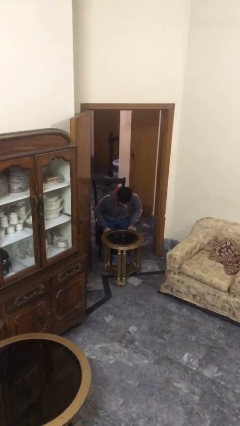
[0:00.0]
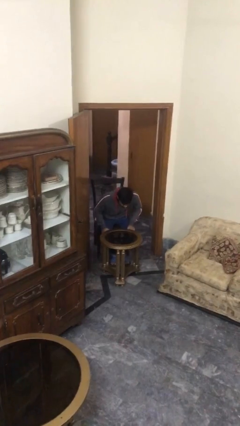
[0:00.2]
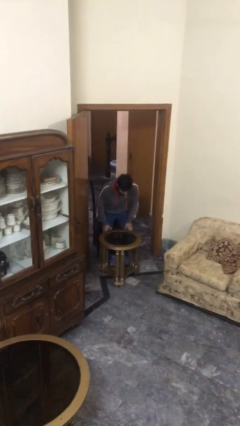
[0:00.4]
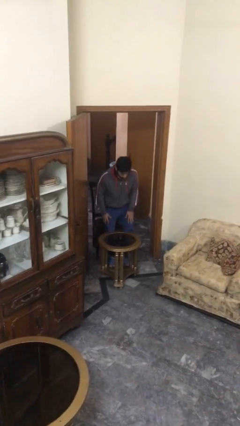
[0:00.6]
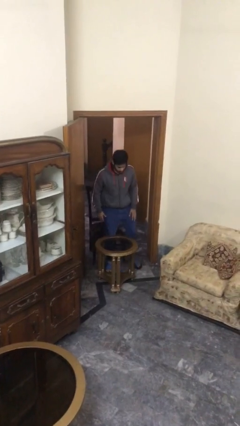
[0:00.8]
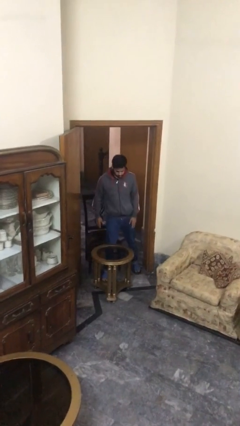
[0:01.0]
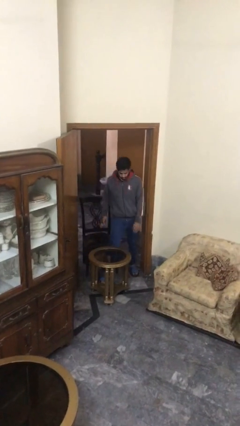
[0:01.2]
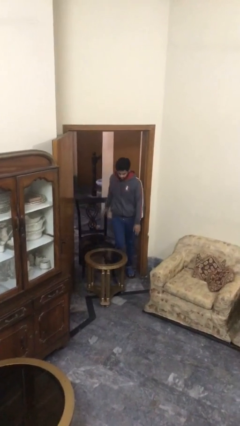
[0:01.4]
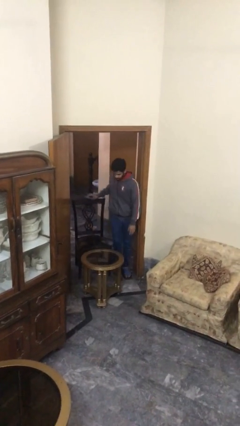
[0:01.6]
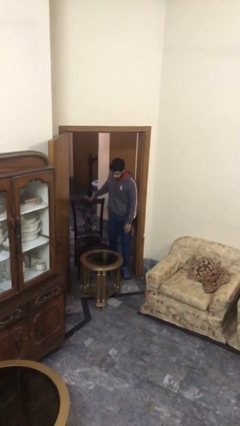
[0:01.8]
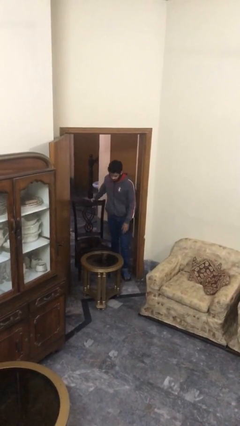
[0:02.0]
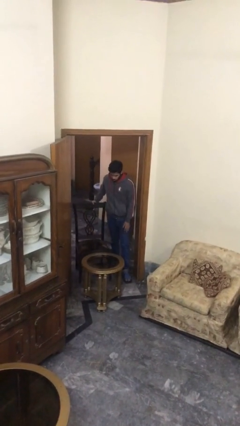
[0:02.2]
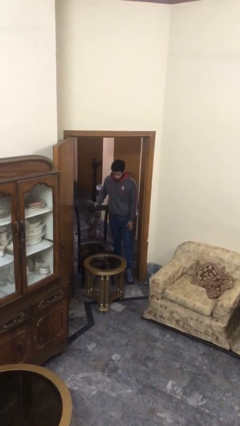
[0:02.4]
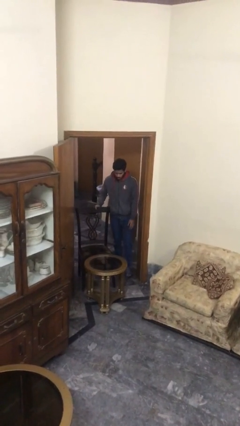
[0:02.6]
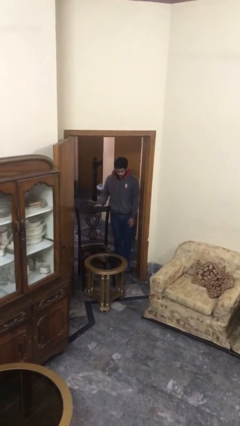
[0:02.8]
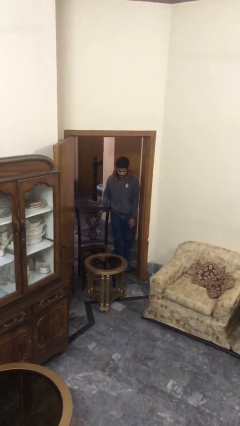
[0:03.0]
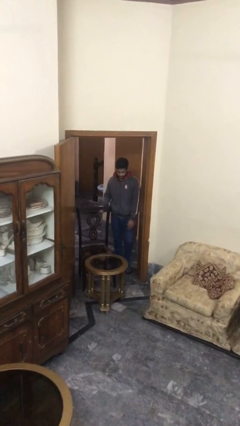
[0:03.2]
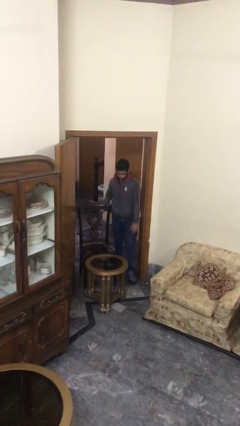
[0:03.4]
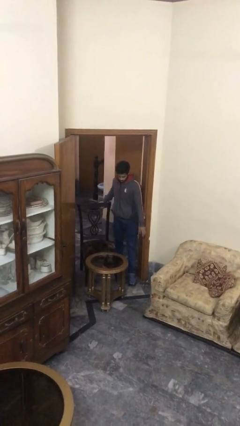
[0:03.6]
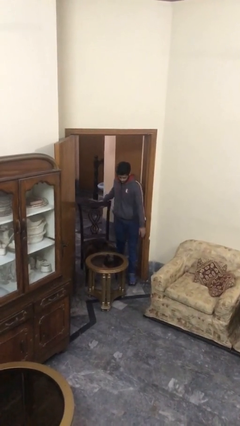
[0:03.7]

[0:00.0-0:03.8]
person stands up

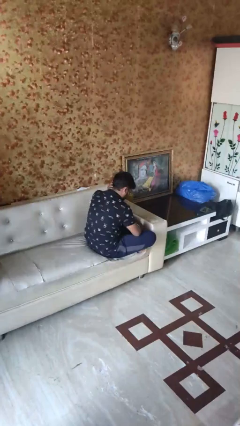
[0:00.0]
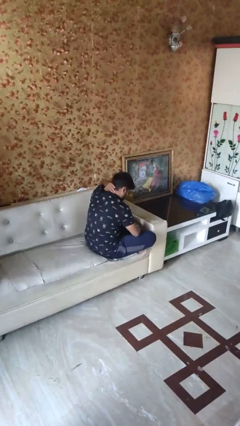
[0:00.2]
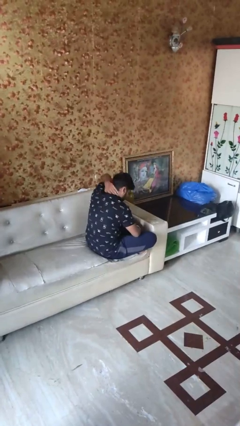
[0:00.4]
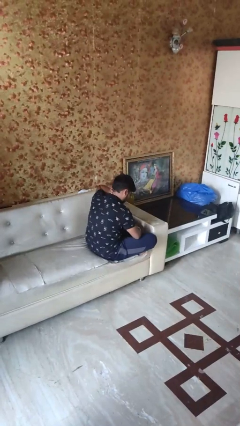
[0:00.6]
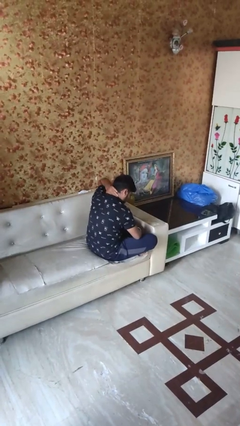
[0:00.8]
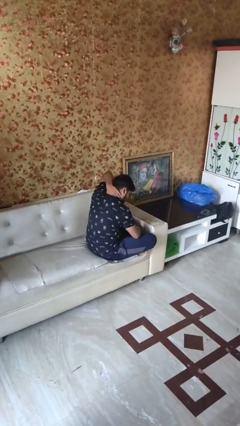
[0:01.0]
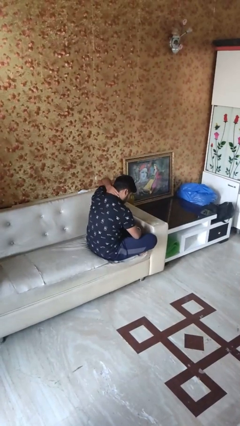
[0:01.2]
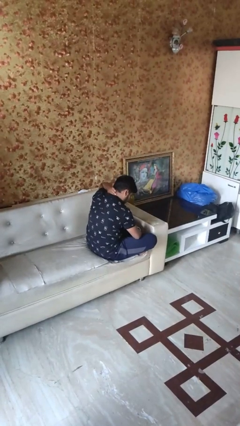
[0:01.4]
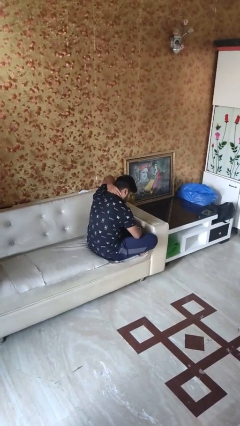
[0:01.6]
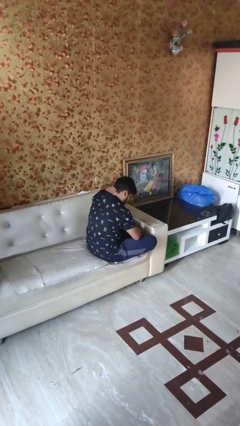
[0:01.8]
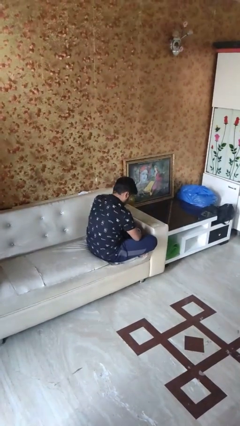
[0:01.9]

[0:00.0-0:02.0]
person rubs neck

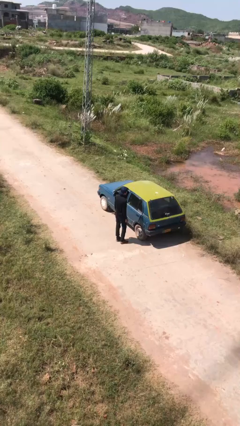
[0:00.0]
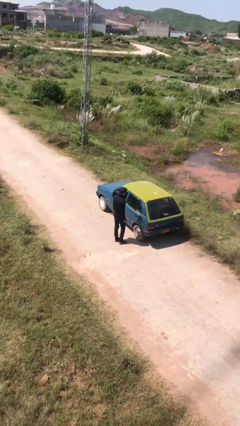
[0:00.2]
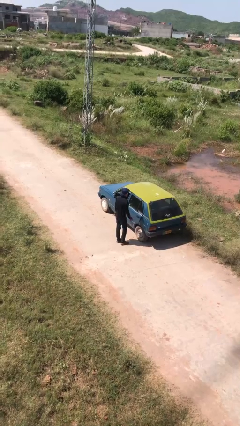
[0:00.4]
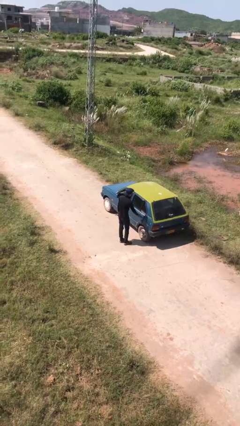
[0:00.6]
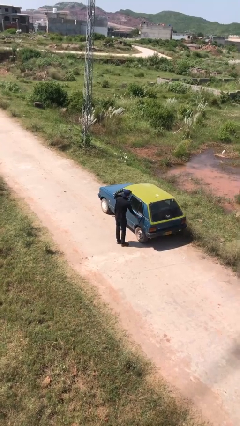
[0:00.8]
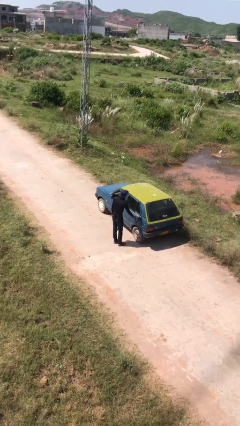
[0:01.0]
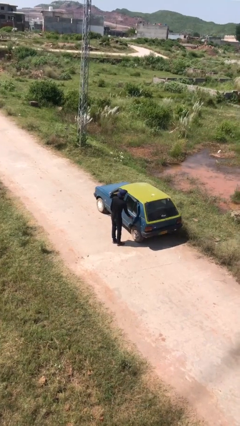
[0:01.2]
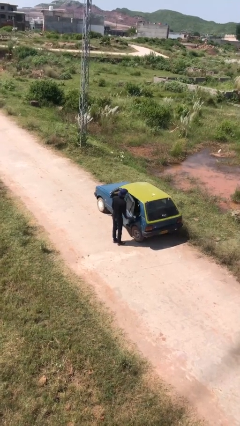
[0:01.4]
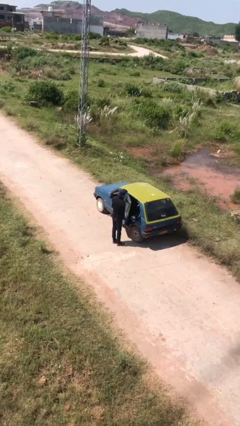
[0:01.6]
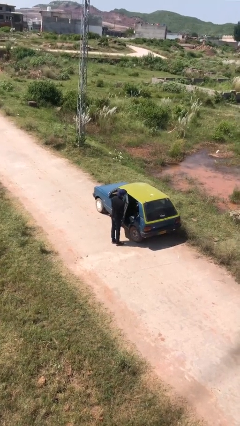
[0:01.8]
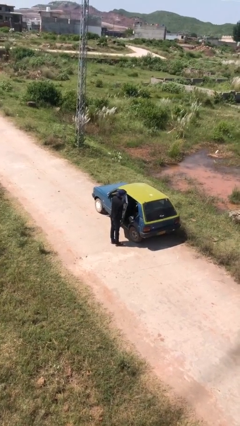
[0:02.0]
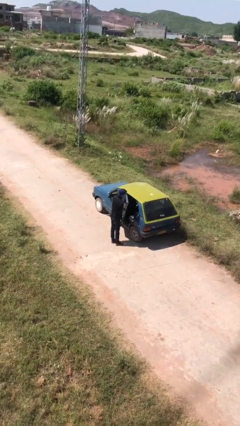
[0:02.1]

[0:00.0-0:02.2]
person opens car door

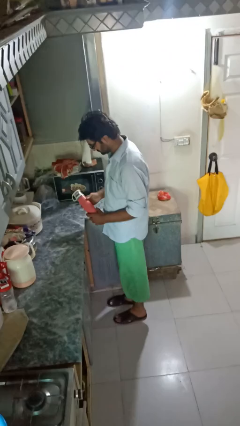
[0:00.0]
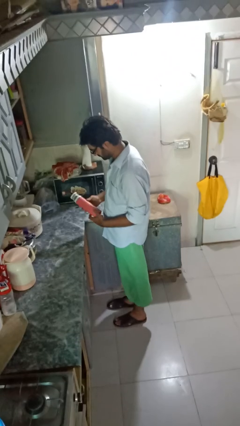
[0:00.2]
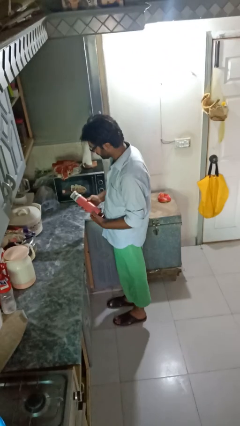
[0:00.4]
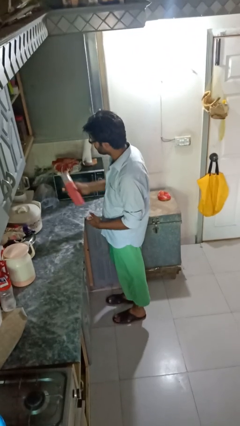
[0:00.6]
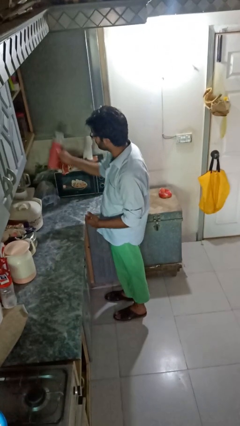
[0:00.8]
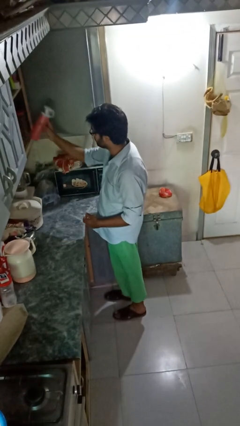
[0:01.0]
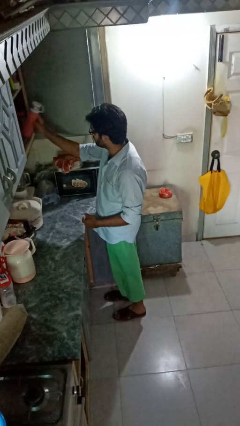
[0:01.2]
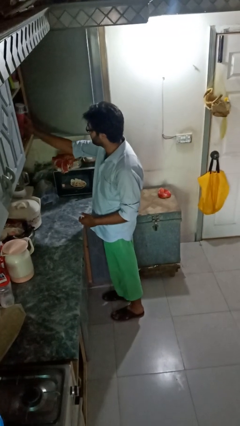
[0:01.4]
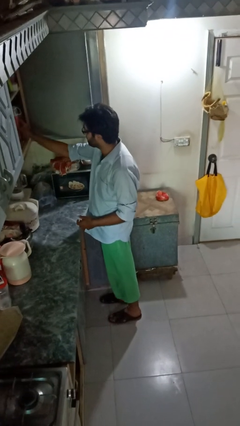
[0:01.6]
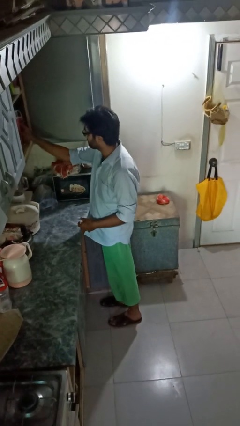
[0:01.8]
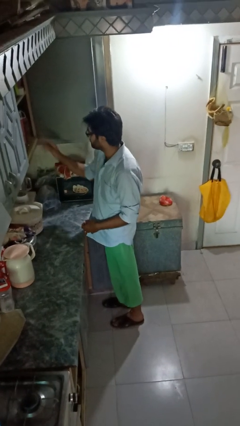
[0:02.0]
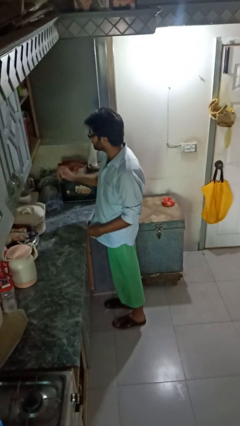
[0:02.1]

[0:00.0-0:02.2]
person puts down object into cabinet

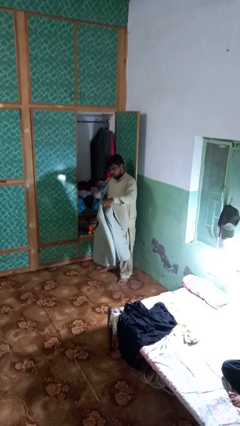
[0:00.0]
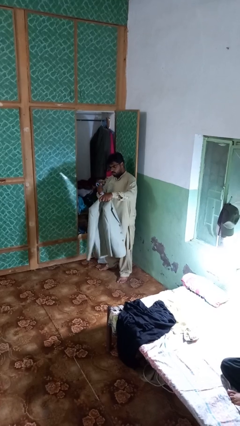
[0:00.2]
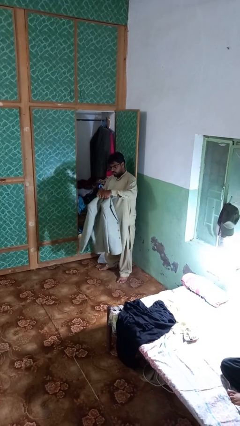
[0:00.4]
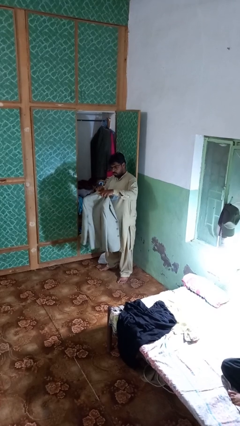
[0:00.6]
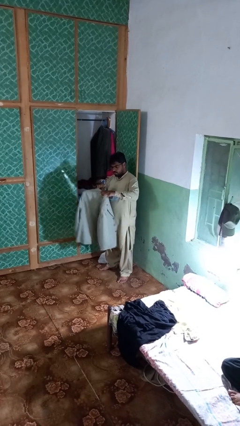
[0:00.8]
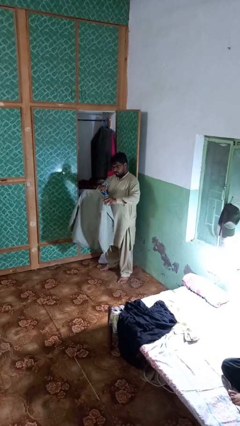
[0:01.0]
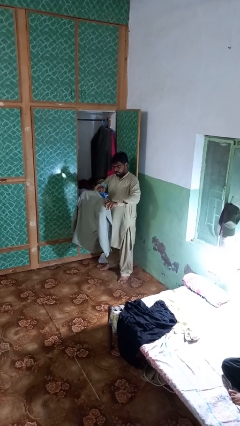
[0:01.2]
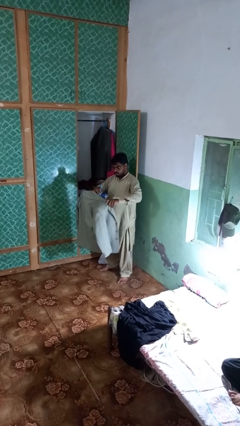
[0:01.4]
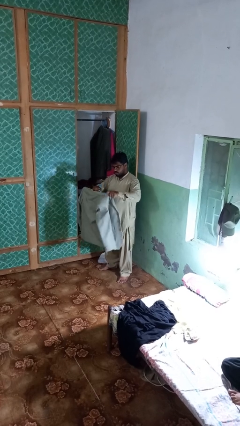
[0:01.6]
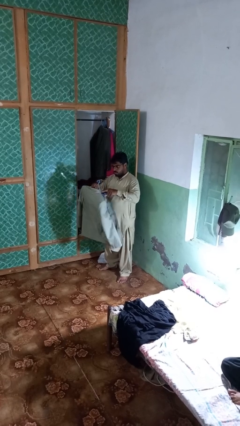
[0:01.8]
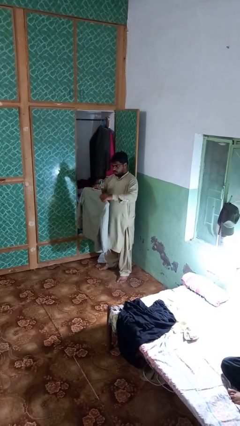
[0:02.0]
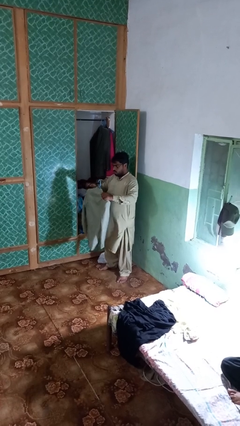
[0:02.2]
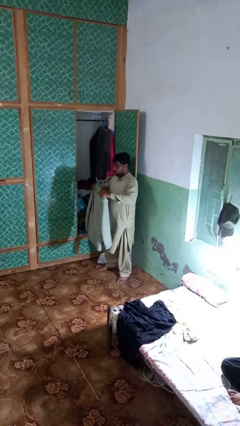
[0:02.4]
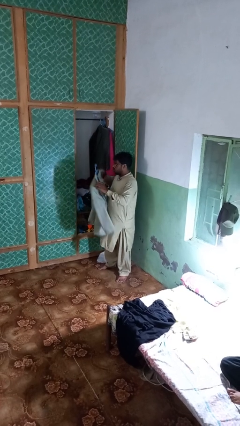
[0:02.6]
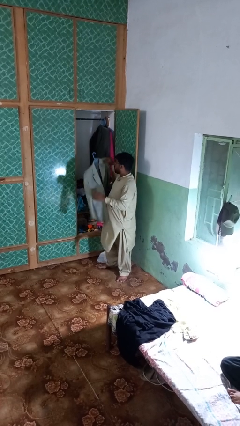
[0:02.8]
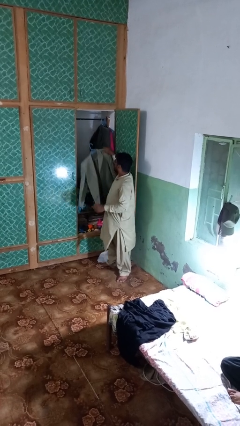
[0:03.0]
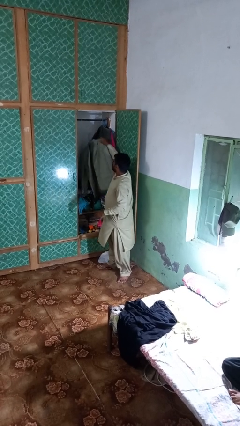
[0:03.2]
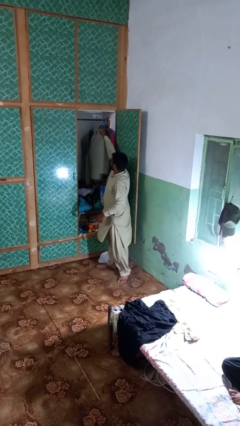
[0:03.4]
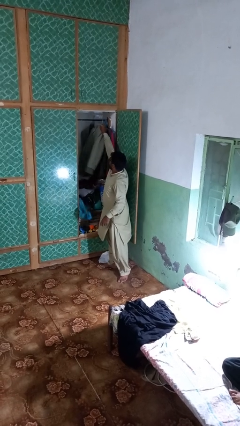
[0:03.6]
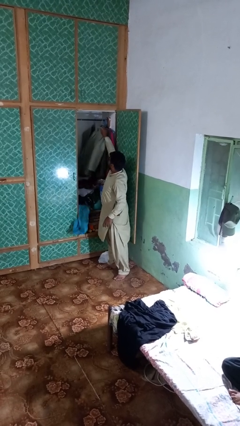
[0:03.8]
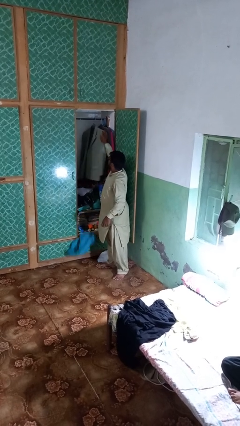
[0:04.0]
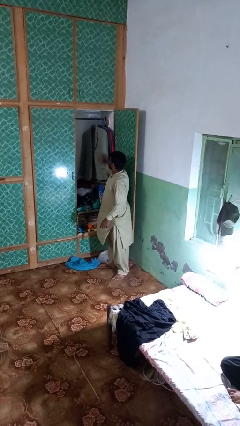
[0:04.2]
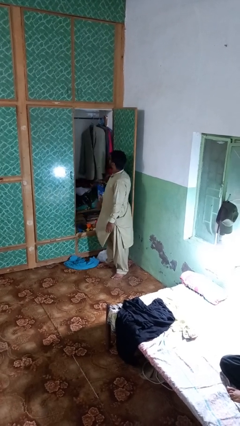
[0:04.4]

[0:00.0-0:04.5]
person puts clothes into closet

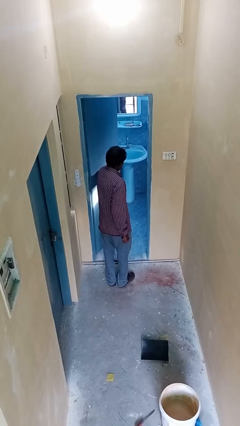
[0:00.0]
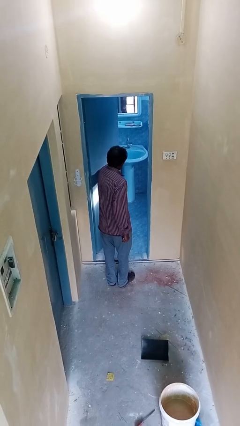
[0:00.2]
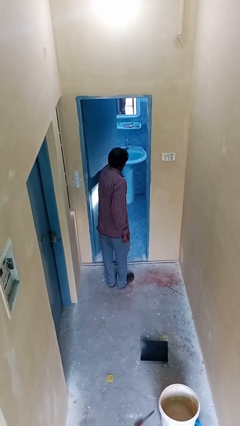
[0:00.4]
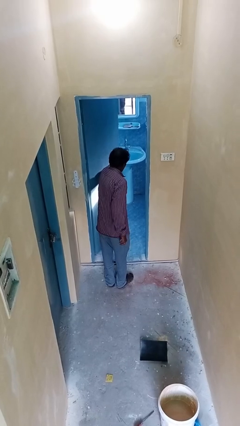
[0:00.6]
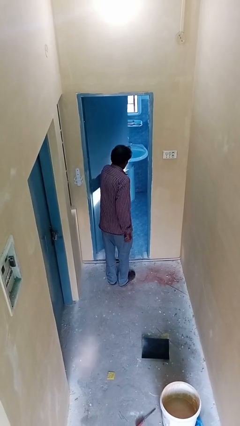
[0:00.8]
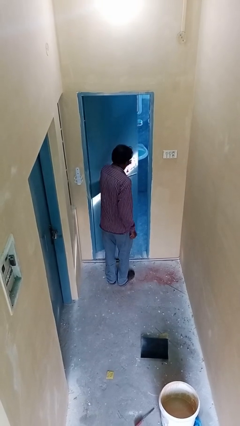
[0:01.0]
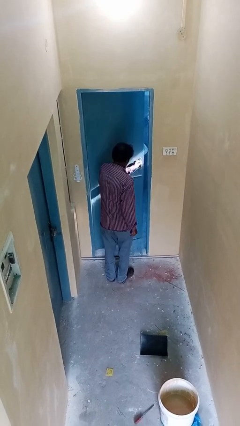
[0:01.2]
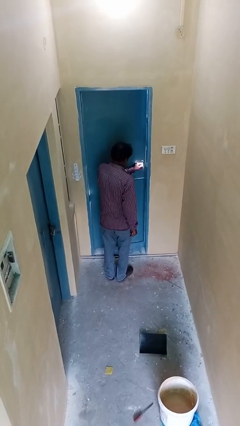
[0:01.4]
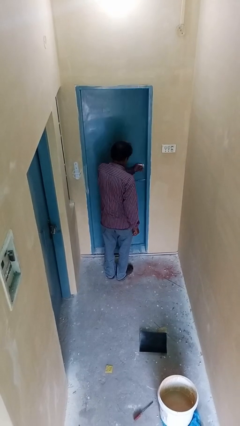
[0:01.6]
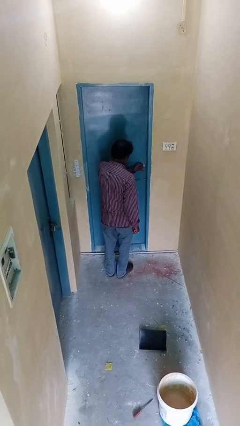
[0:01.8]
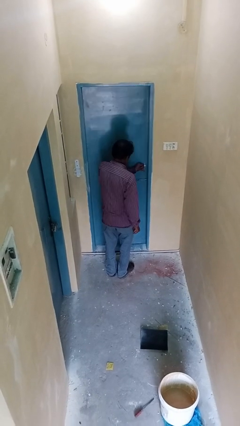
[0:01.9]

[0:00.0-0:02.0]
person closes facility door

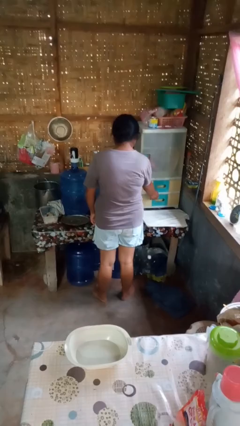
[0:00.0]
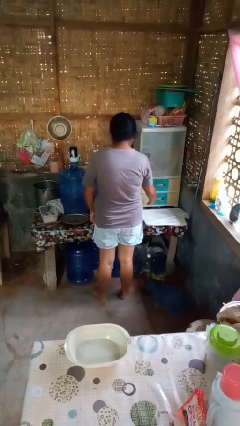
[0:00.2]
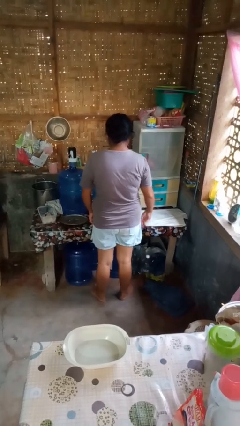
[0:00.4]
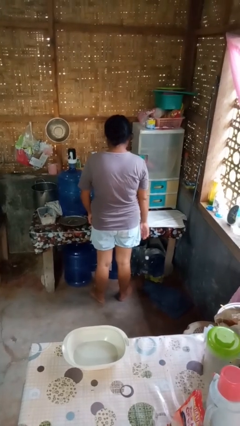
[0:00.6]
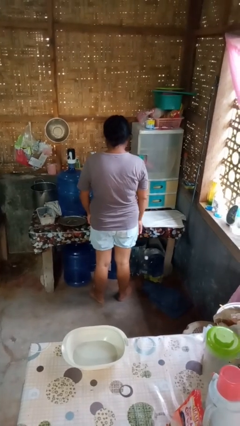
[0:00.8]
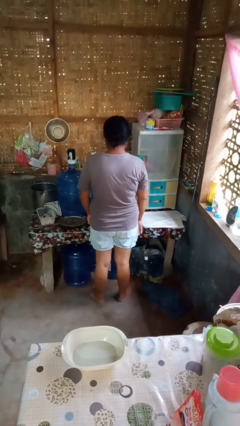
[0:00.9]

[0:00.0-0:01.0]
person closes kitchen drawer
